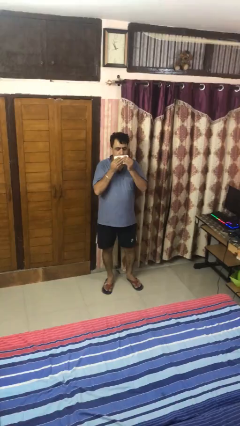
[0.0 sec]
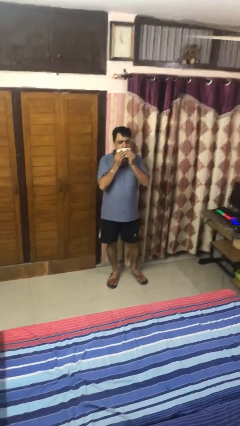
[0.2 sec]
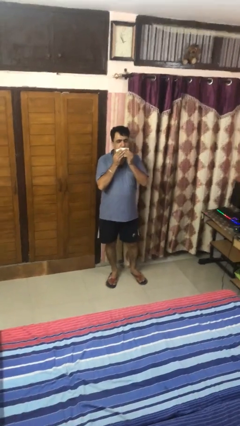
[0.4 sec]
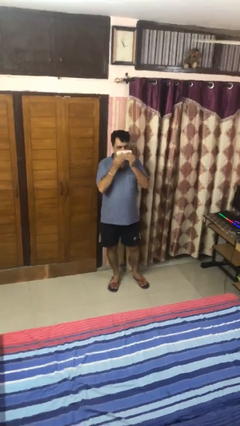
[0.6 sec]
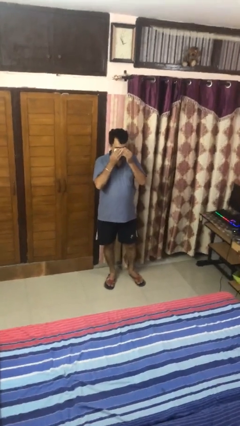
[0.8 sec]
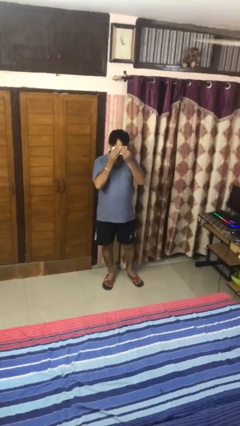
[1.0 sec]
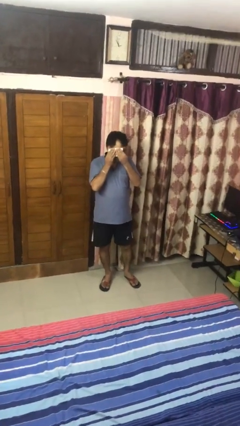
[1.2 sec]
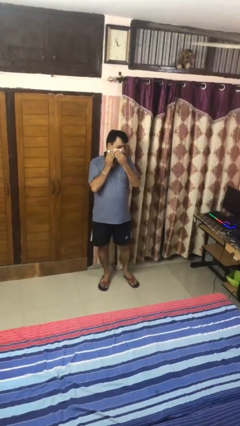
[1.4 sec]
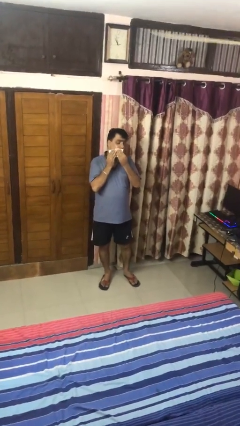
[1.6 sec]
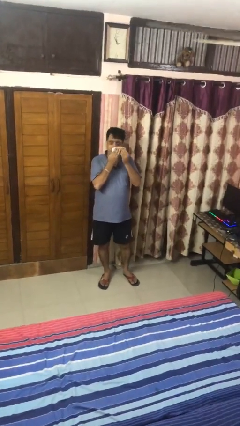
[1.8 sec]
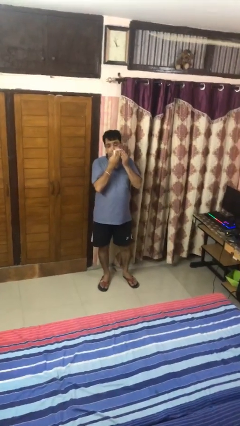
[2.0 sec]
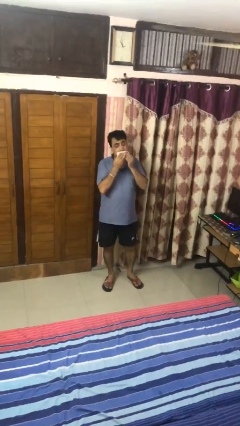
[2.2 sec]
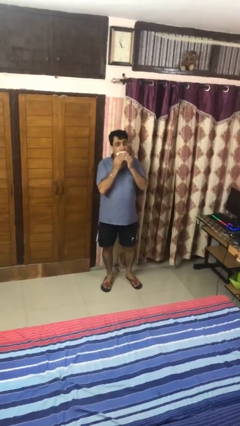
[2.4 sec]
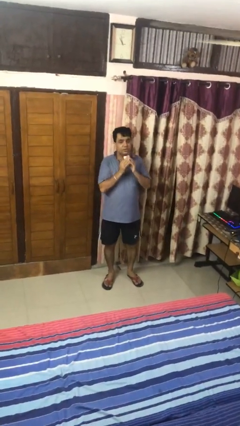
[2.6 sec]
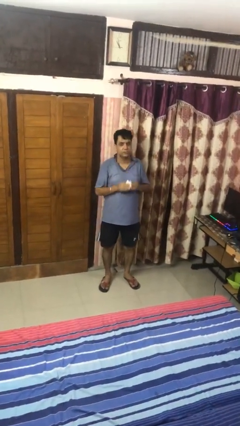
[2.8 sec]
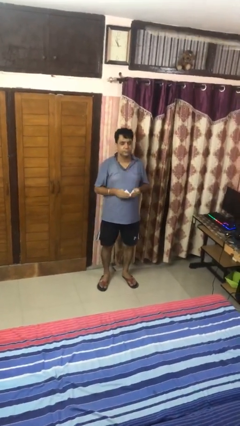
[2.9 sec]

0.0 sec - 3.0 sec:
person wipes mouth with napkin

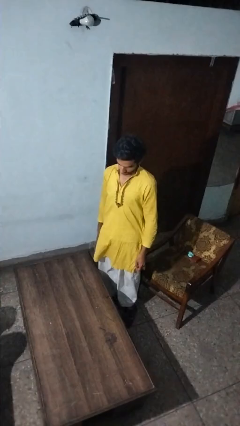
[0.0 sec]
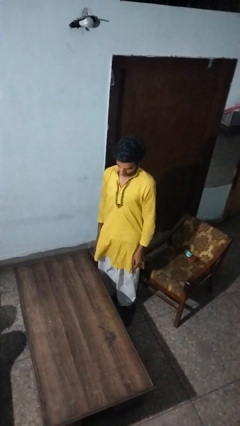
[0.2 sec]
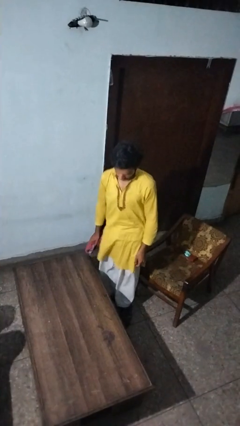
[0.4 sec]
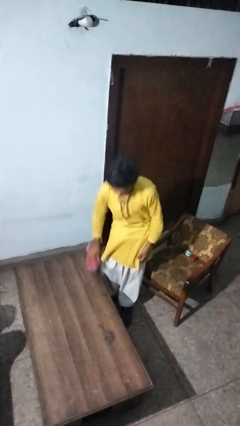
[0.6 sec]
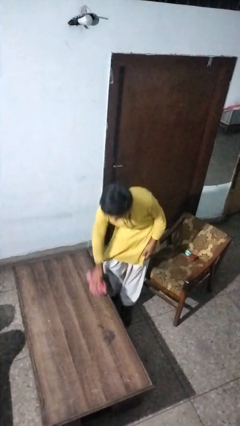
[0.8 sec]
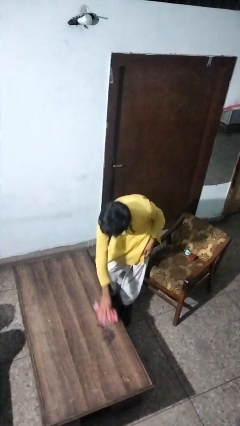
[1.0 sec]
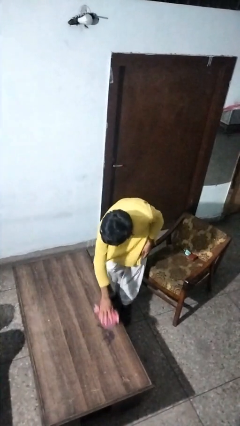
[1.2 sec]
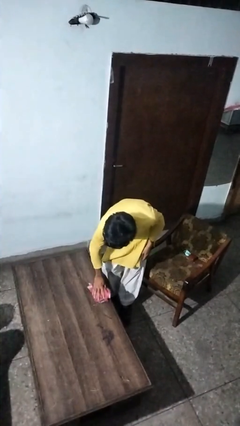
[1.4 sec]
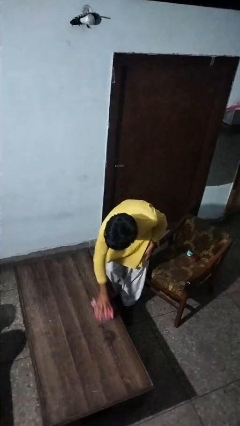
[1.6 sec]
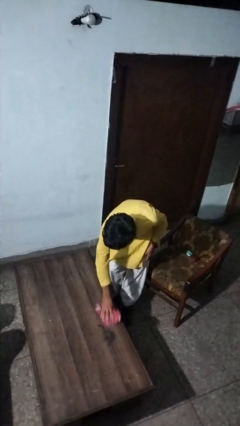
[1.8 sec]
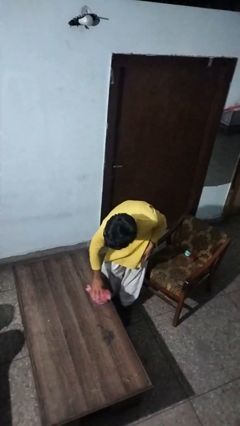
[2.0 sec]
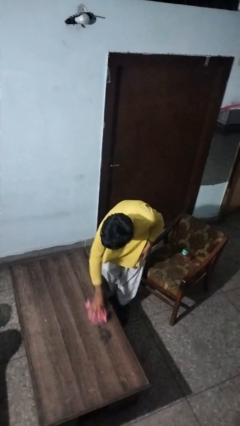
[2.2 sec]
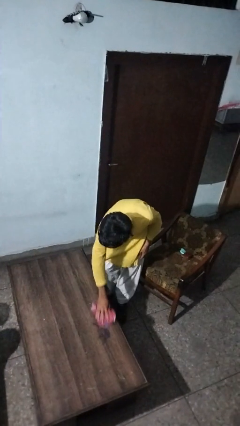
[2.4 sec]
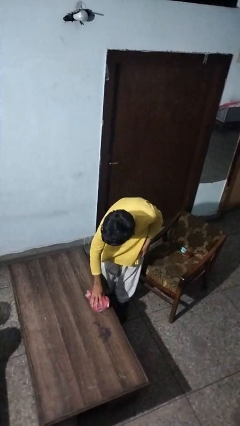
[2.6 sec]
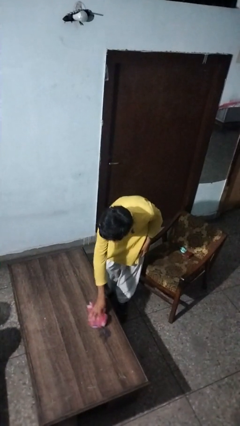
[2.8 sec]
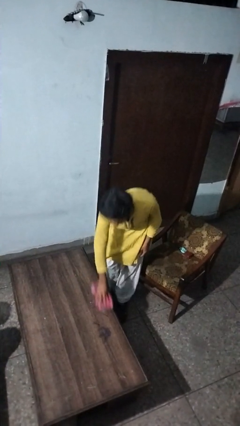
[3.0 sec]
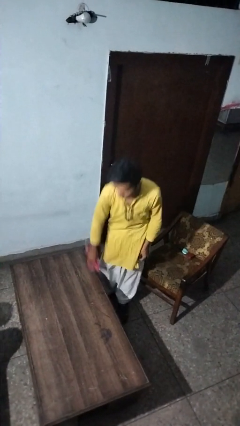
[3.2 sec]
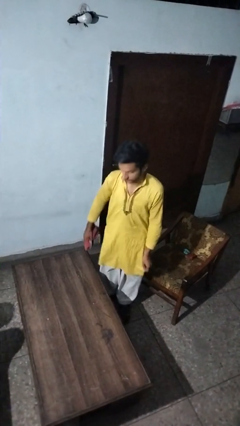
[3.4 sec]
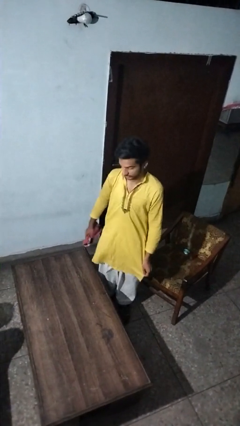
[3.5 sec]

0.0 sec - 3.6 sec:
person cleans table with rag

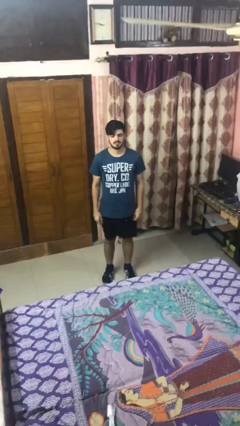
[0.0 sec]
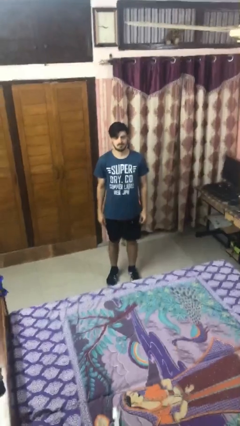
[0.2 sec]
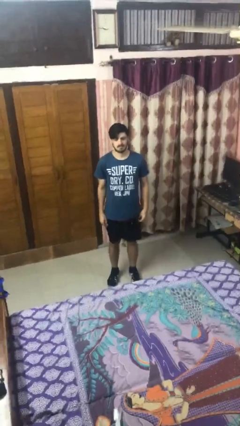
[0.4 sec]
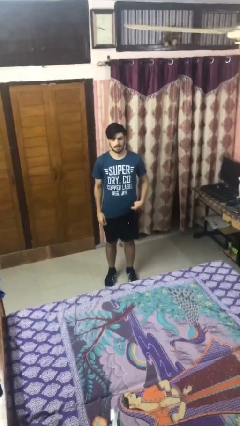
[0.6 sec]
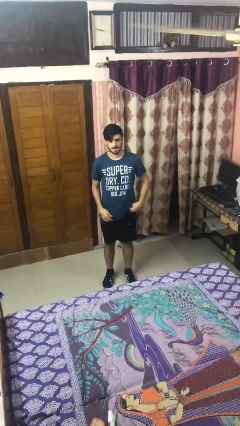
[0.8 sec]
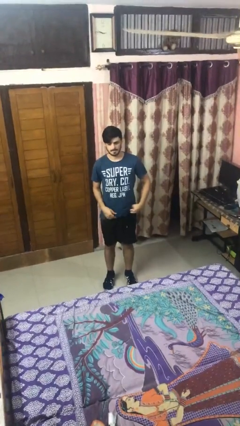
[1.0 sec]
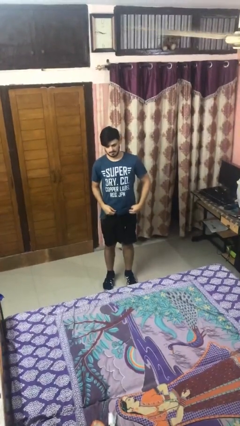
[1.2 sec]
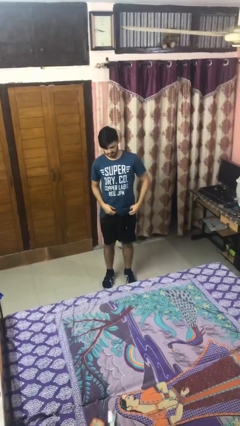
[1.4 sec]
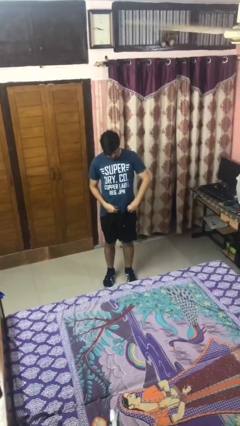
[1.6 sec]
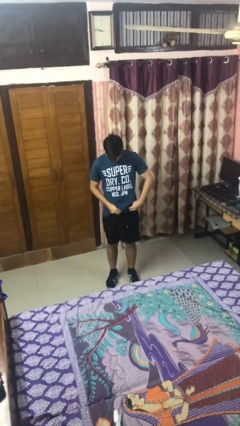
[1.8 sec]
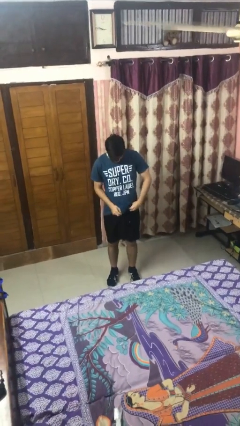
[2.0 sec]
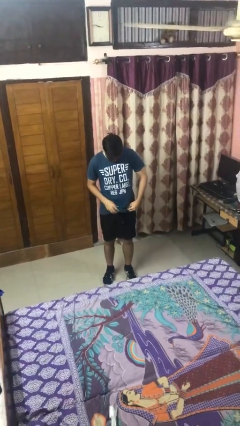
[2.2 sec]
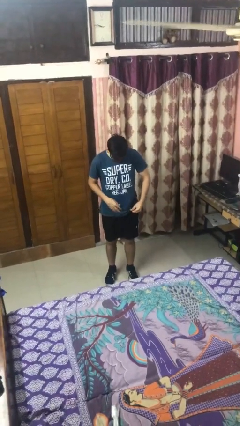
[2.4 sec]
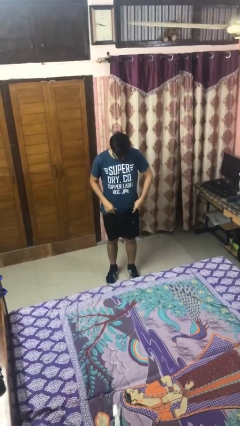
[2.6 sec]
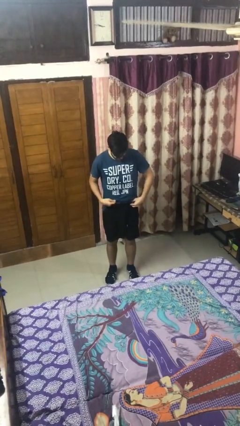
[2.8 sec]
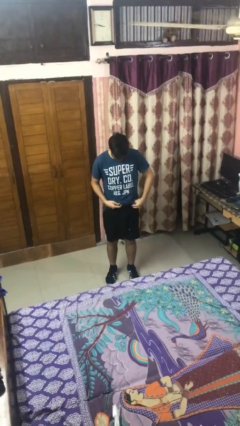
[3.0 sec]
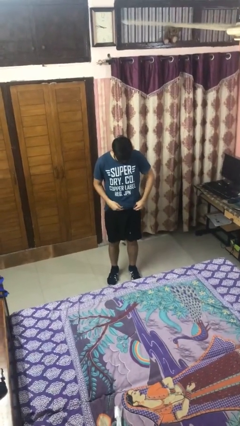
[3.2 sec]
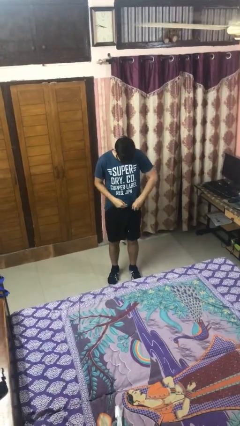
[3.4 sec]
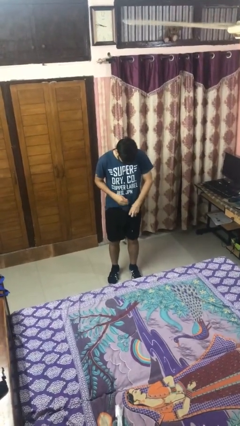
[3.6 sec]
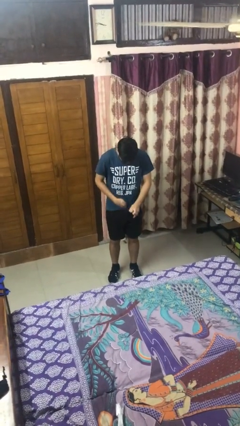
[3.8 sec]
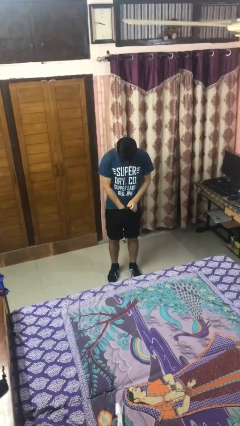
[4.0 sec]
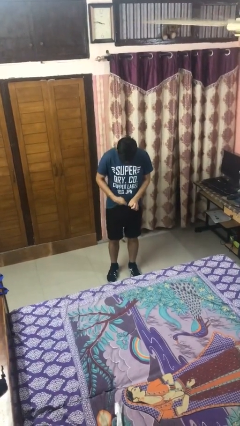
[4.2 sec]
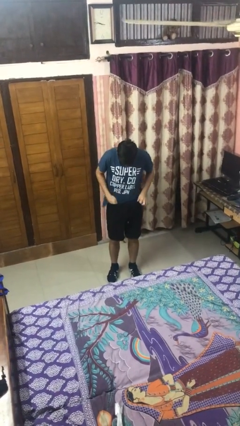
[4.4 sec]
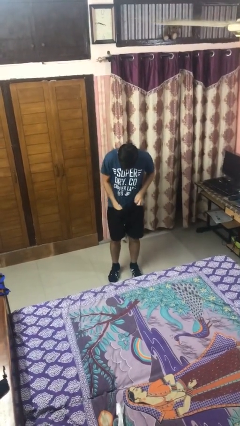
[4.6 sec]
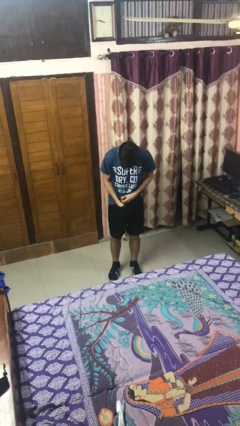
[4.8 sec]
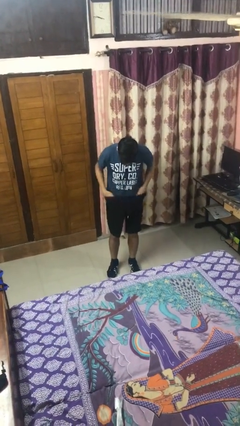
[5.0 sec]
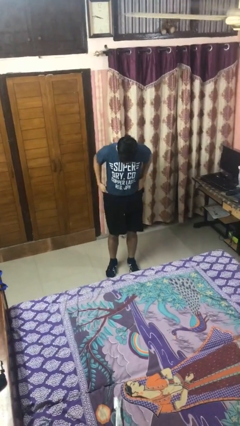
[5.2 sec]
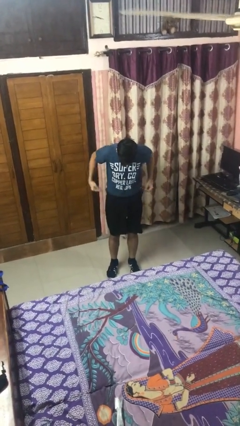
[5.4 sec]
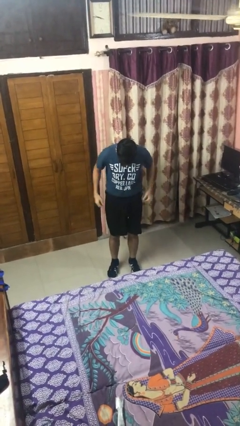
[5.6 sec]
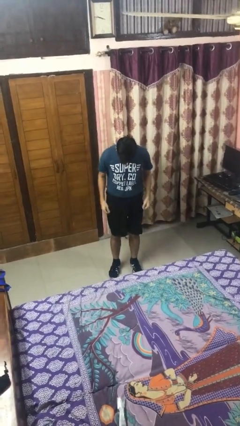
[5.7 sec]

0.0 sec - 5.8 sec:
person tucks in shirt

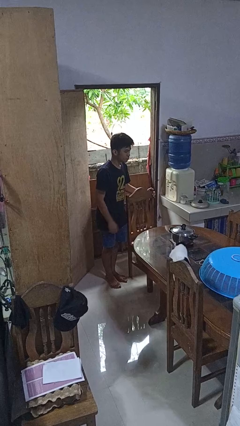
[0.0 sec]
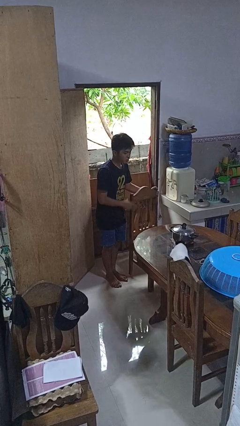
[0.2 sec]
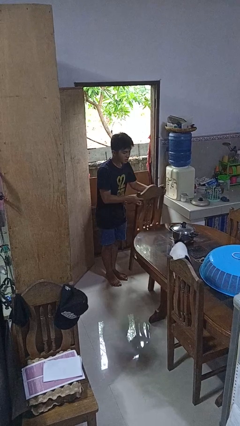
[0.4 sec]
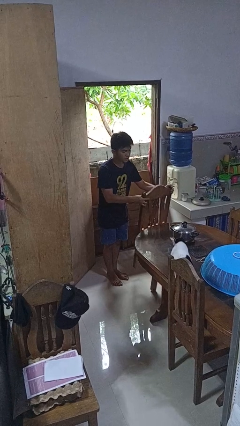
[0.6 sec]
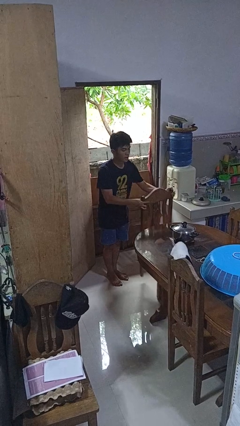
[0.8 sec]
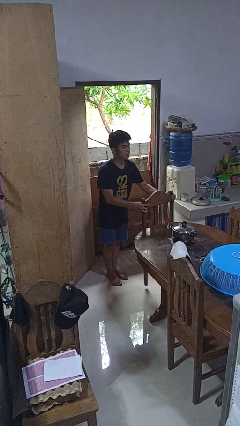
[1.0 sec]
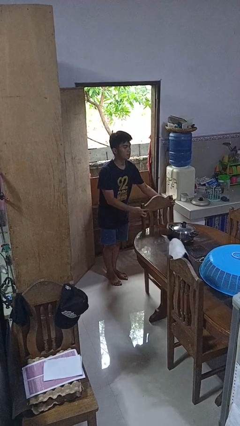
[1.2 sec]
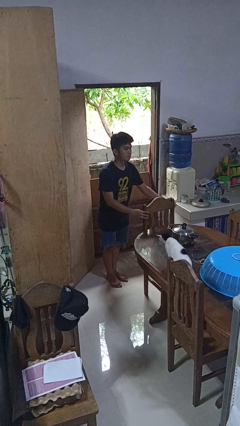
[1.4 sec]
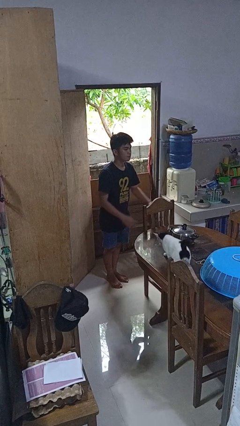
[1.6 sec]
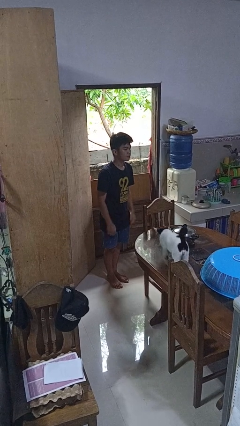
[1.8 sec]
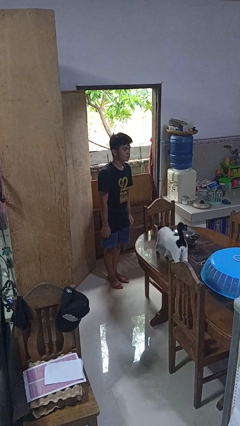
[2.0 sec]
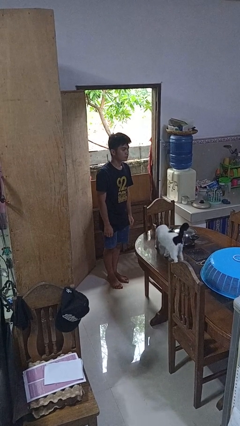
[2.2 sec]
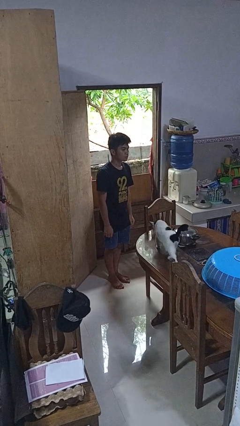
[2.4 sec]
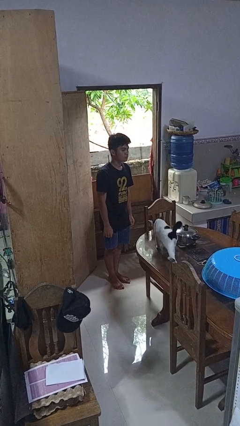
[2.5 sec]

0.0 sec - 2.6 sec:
person pushes in chair

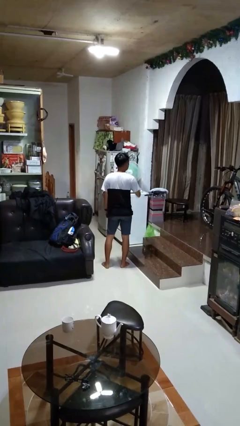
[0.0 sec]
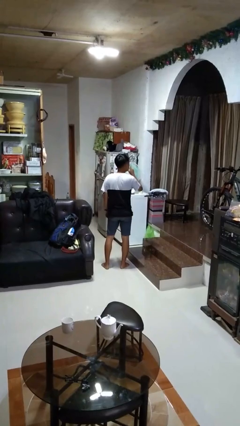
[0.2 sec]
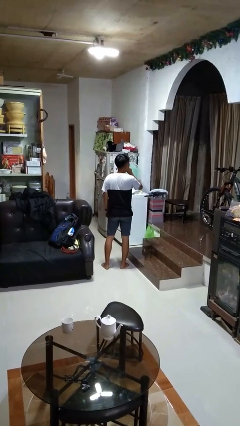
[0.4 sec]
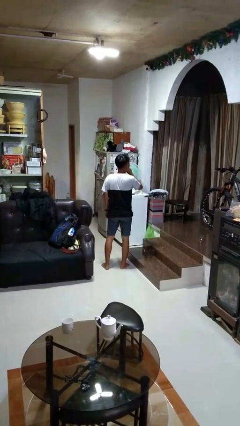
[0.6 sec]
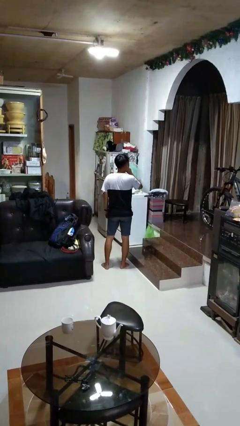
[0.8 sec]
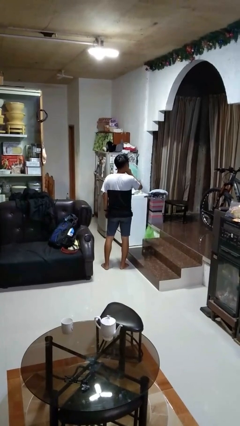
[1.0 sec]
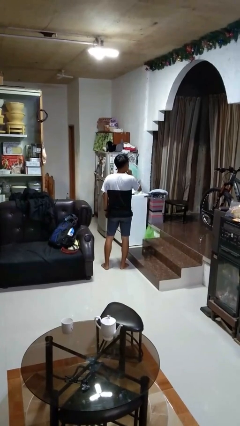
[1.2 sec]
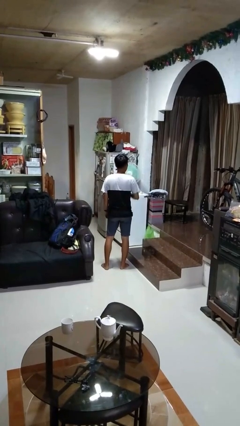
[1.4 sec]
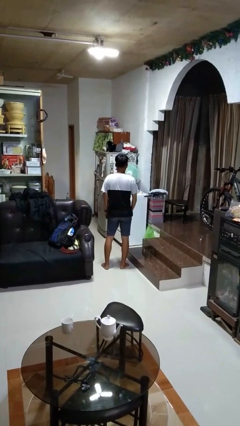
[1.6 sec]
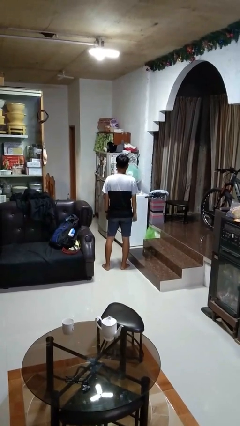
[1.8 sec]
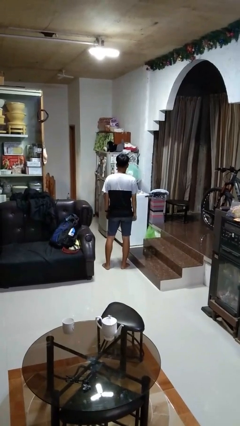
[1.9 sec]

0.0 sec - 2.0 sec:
person gestures be quiet

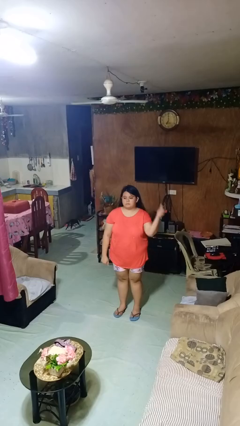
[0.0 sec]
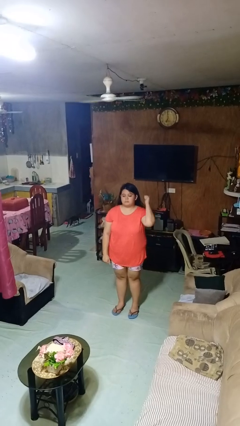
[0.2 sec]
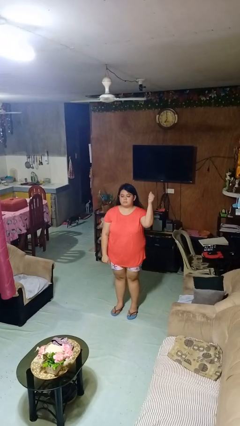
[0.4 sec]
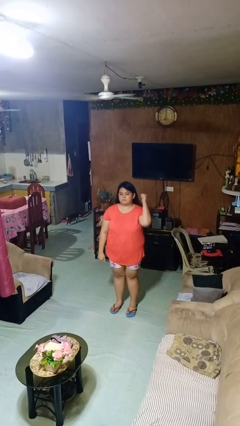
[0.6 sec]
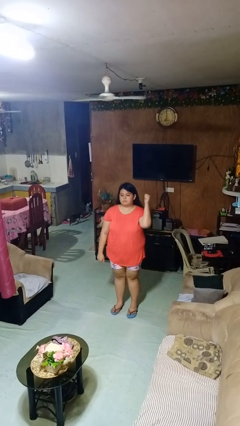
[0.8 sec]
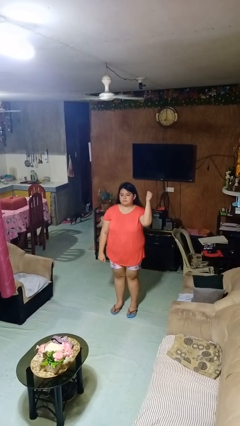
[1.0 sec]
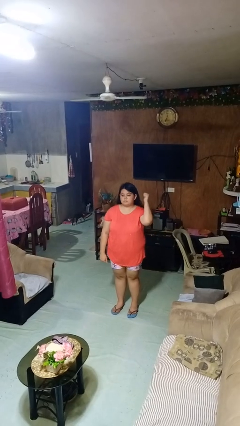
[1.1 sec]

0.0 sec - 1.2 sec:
person gestures behind me
